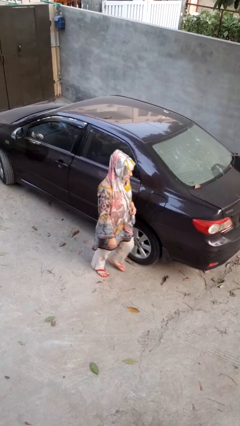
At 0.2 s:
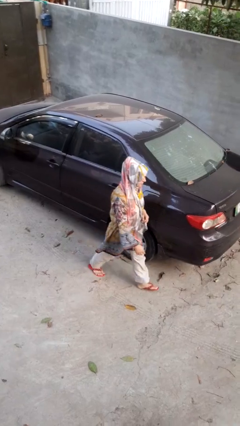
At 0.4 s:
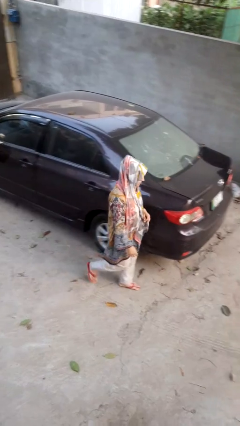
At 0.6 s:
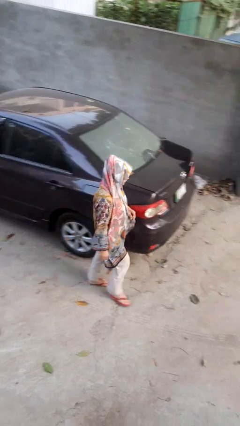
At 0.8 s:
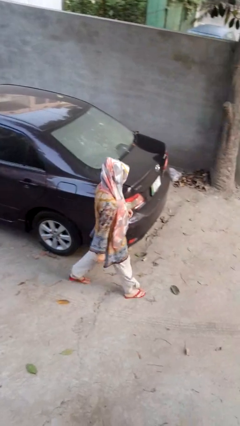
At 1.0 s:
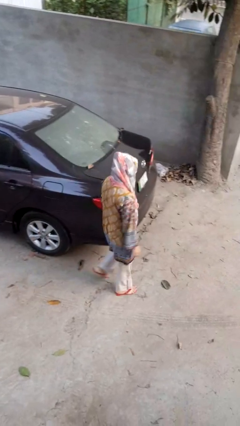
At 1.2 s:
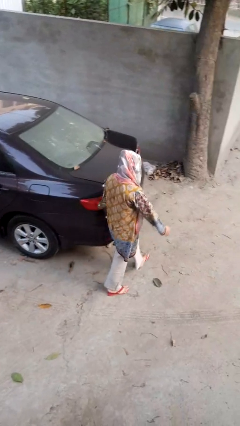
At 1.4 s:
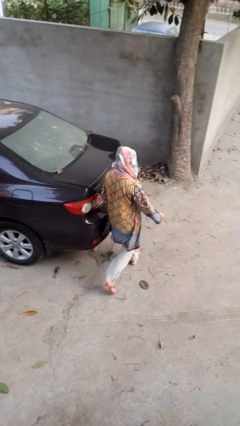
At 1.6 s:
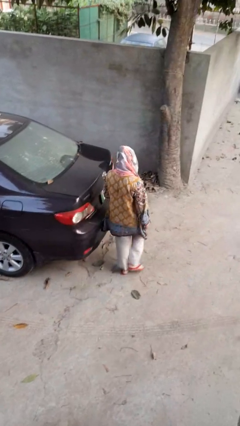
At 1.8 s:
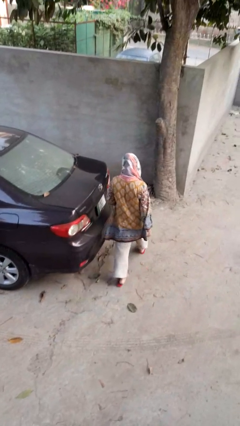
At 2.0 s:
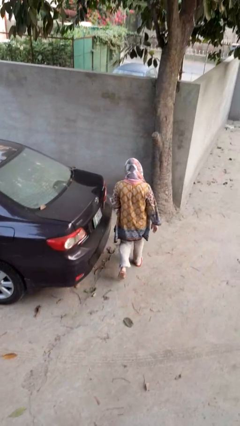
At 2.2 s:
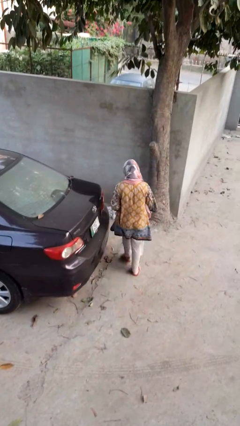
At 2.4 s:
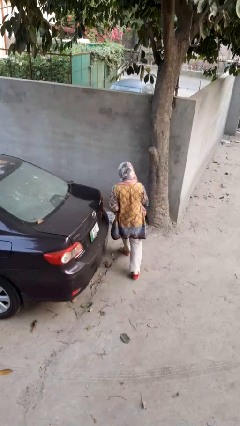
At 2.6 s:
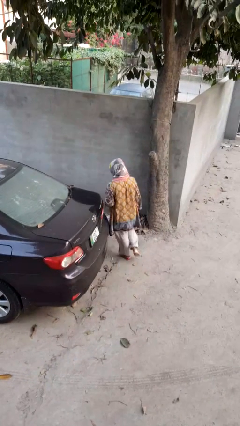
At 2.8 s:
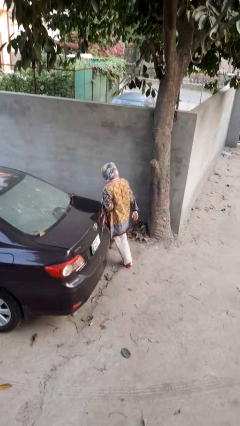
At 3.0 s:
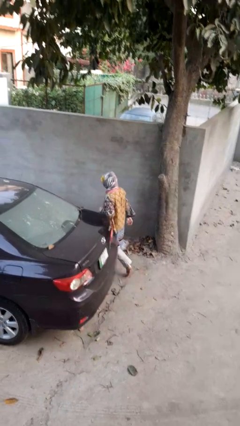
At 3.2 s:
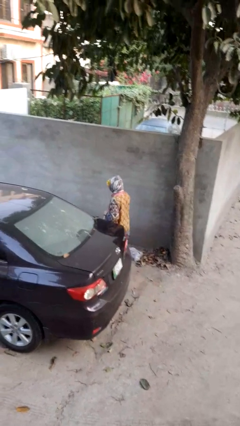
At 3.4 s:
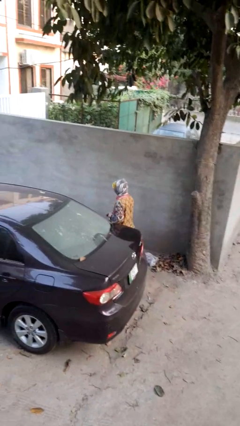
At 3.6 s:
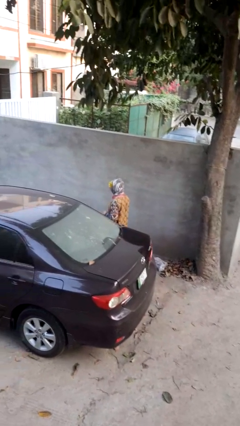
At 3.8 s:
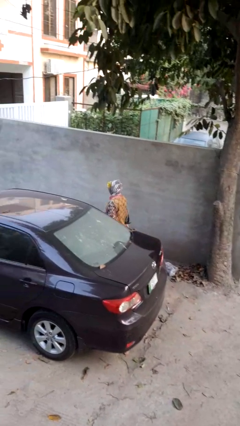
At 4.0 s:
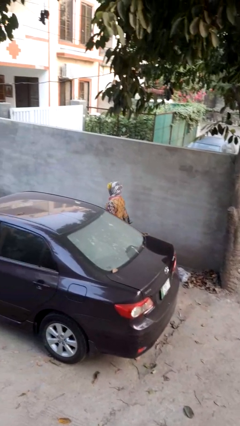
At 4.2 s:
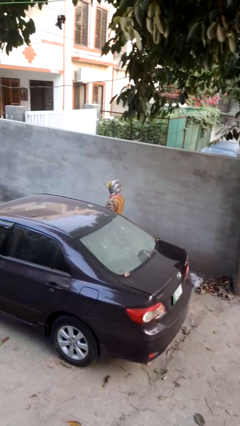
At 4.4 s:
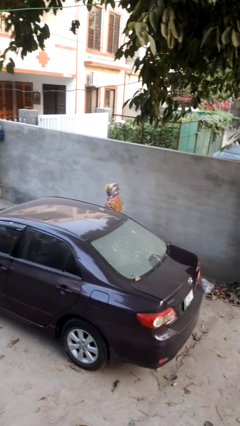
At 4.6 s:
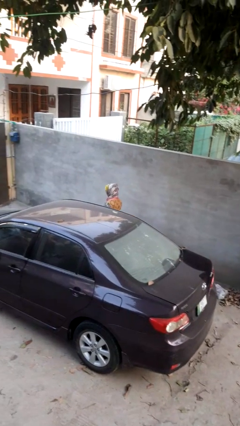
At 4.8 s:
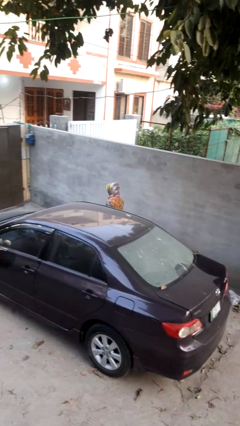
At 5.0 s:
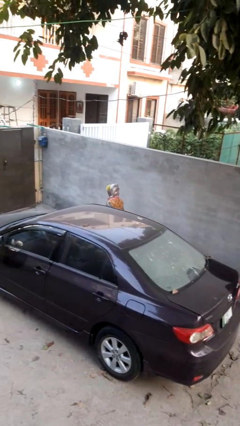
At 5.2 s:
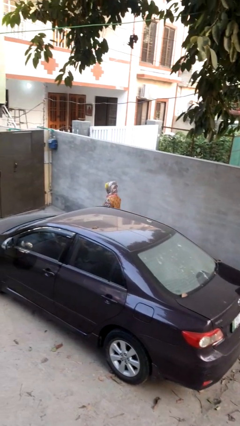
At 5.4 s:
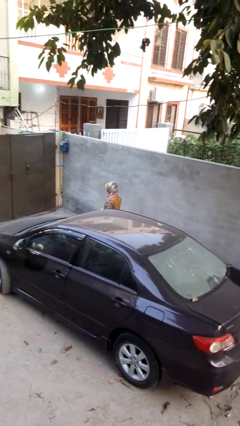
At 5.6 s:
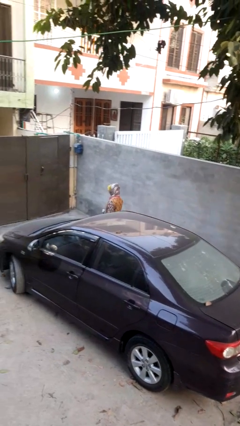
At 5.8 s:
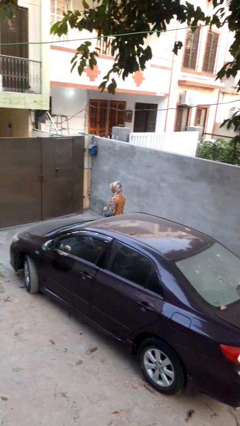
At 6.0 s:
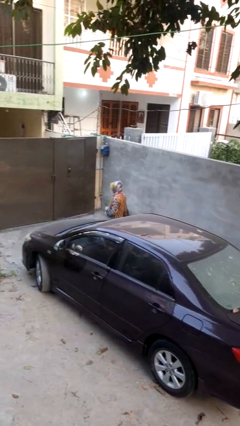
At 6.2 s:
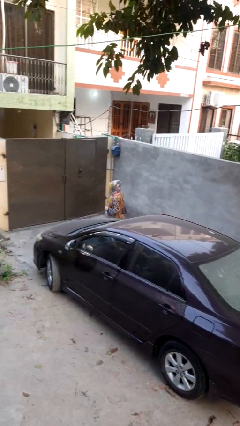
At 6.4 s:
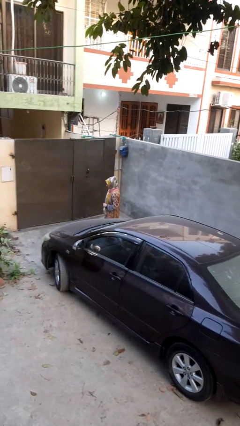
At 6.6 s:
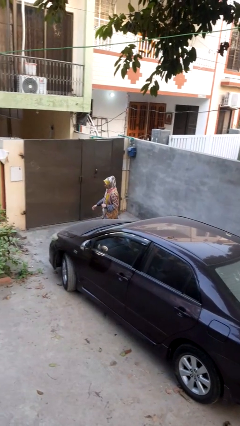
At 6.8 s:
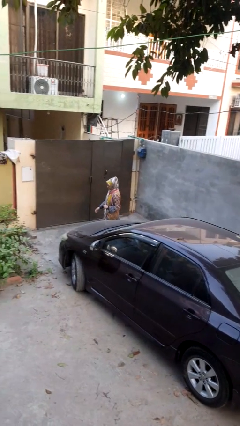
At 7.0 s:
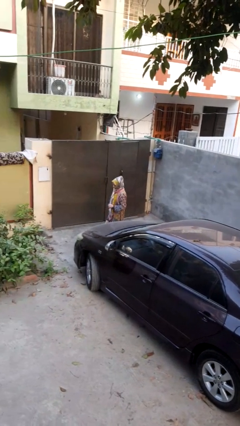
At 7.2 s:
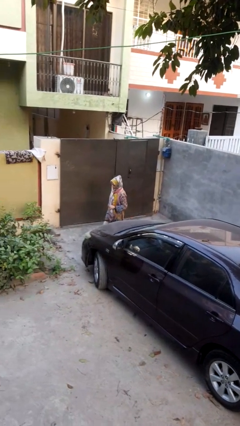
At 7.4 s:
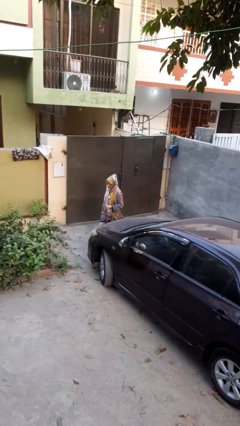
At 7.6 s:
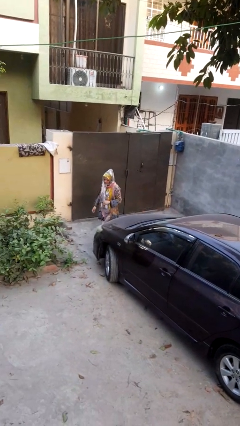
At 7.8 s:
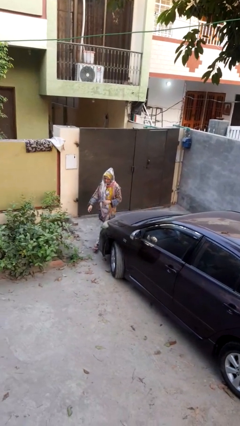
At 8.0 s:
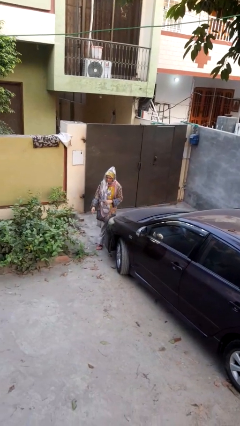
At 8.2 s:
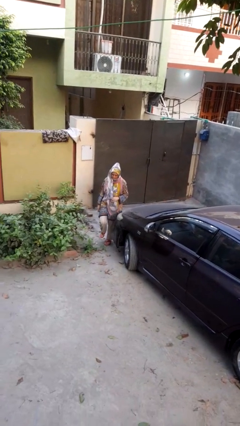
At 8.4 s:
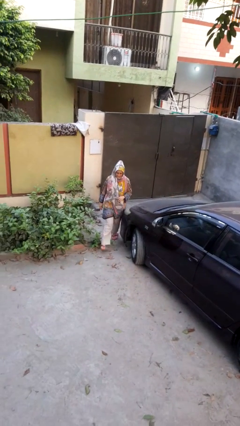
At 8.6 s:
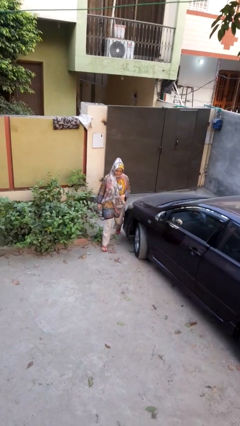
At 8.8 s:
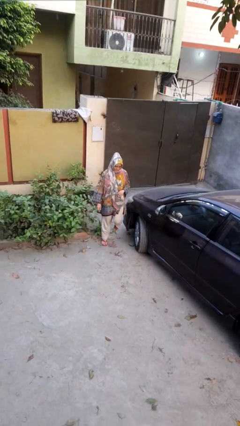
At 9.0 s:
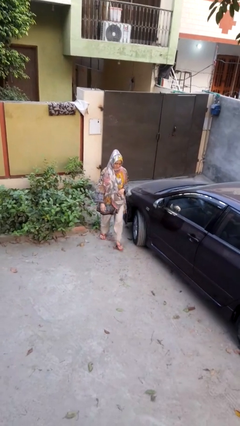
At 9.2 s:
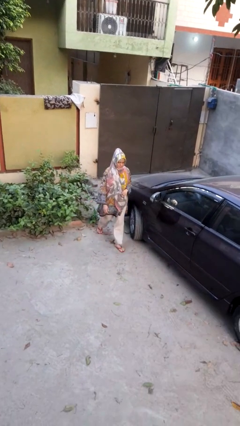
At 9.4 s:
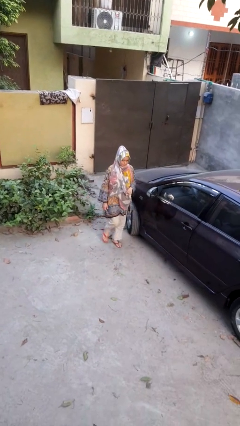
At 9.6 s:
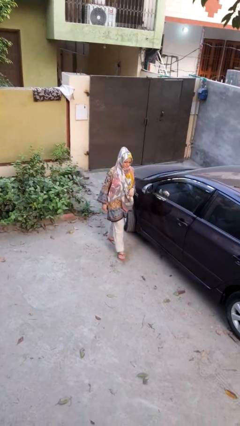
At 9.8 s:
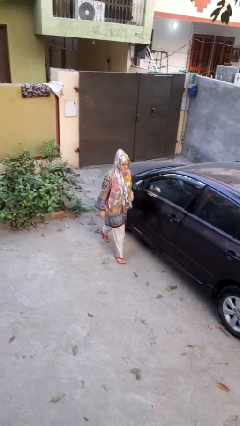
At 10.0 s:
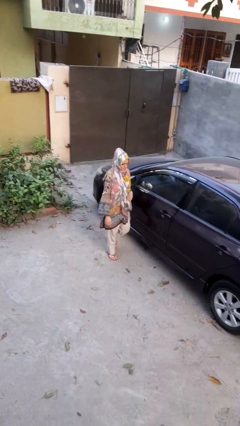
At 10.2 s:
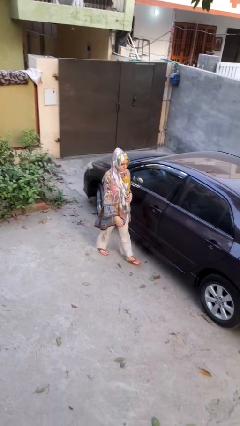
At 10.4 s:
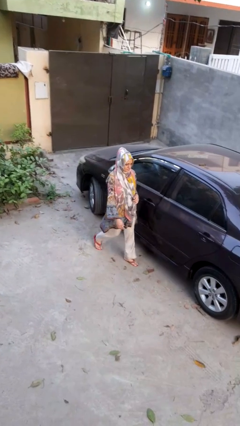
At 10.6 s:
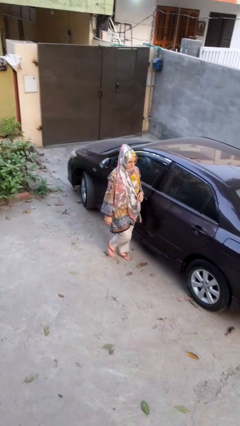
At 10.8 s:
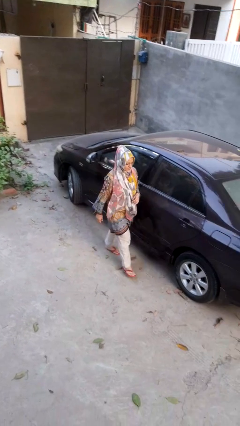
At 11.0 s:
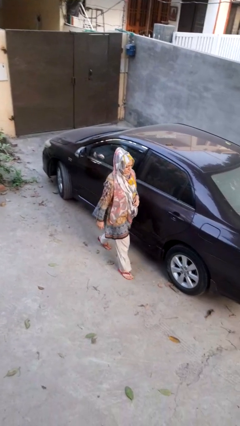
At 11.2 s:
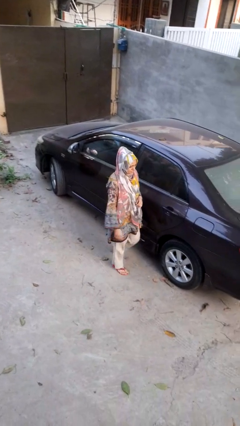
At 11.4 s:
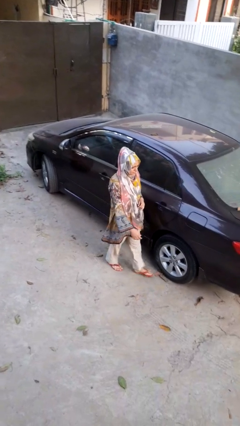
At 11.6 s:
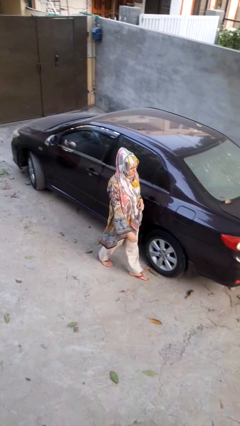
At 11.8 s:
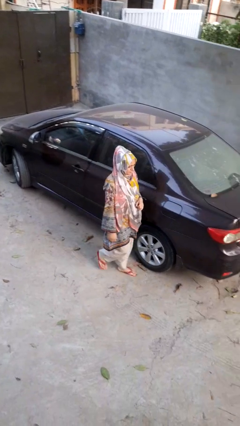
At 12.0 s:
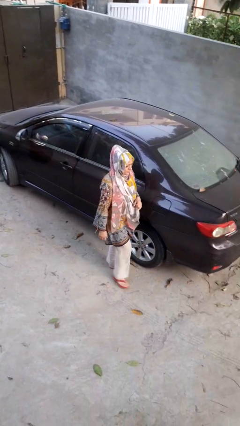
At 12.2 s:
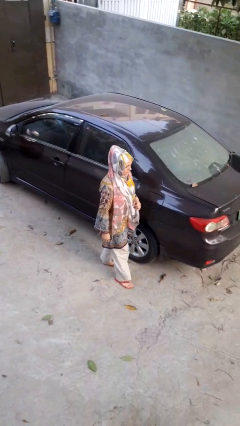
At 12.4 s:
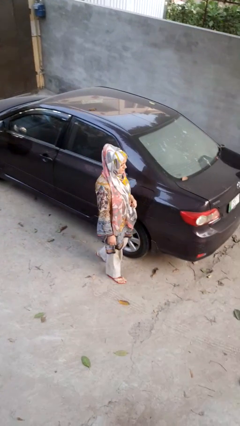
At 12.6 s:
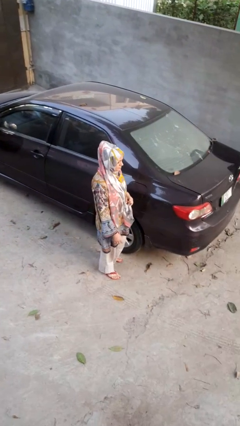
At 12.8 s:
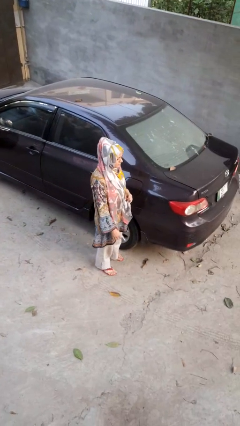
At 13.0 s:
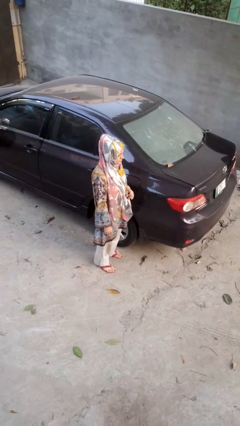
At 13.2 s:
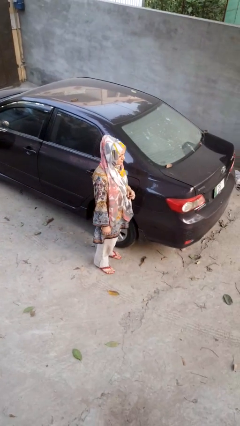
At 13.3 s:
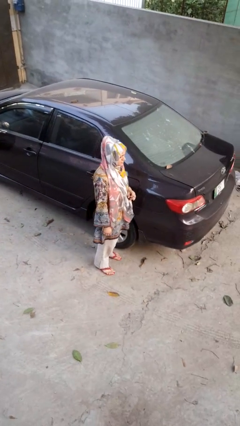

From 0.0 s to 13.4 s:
person walks around car

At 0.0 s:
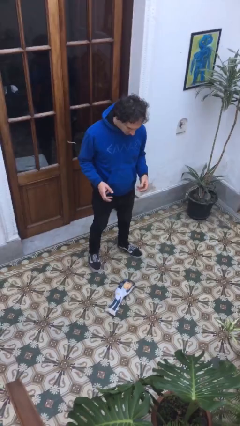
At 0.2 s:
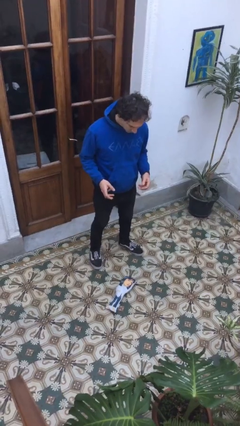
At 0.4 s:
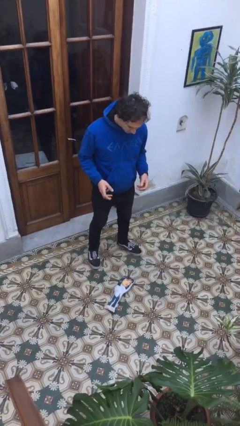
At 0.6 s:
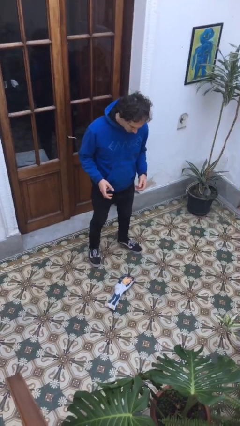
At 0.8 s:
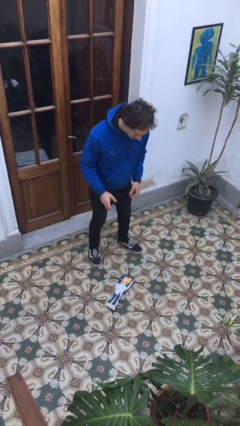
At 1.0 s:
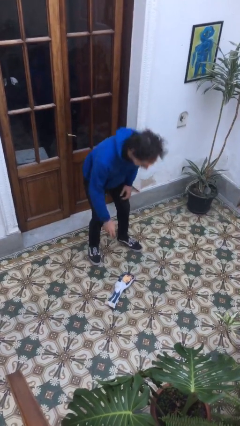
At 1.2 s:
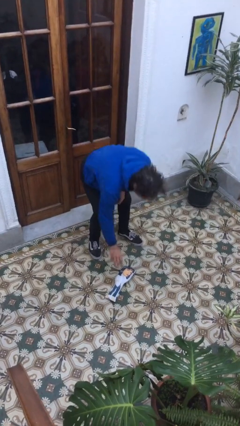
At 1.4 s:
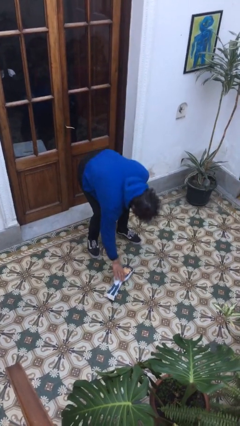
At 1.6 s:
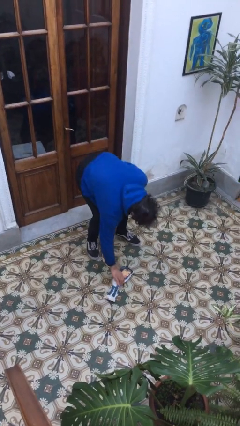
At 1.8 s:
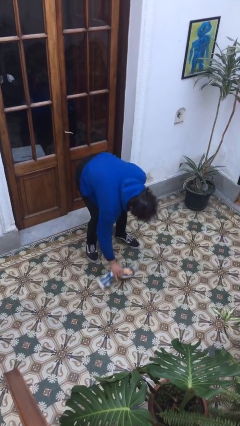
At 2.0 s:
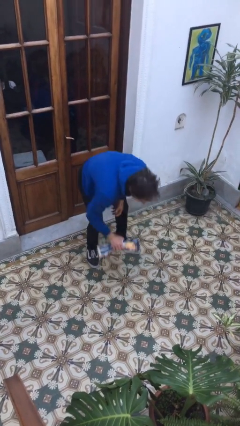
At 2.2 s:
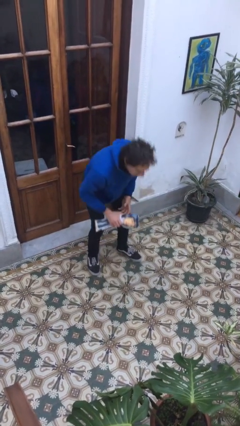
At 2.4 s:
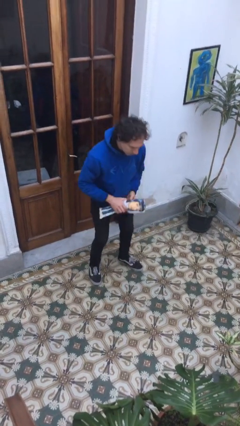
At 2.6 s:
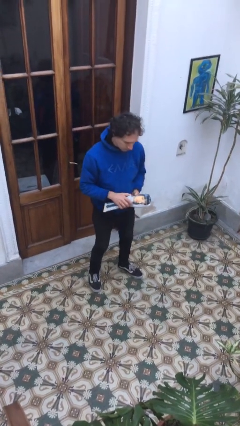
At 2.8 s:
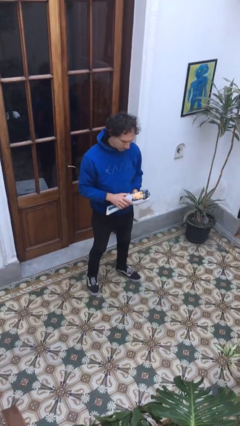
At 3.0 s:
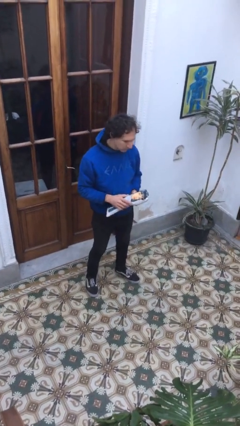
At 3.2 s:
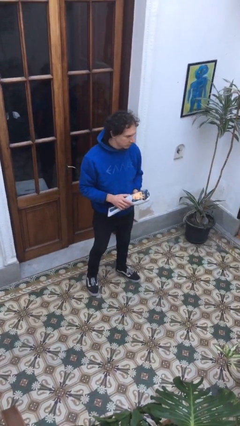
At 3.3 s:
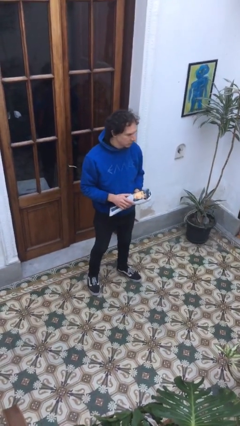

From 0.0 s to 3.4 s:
person picks up object from floor

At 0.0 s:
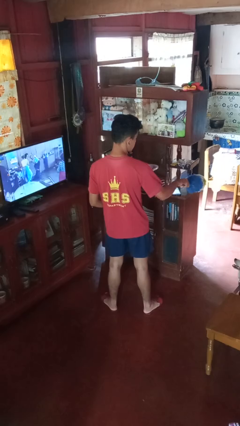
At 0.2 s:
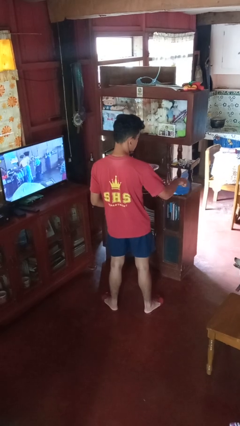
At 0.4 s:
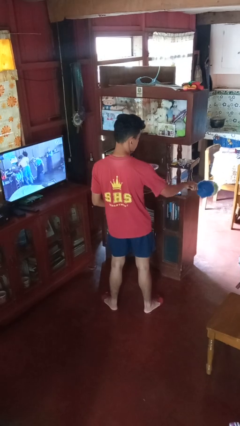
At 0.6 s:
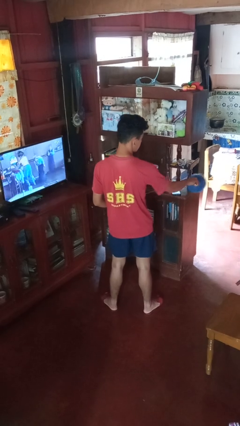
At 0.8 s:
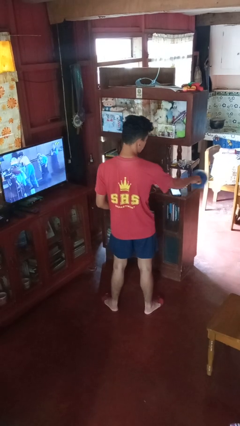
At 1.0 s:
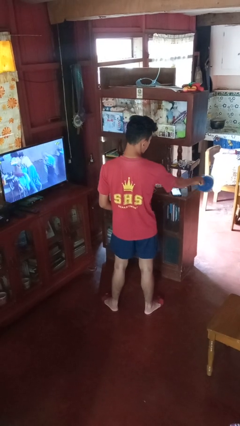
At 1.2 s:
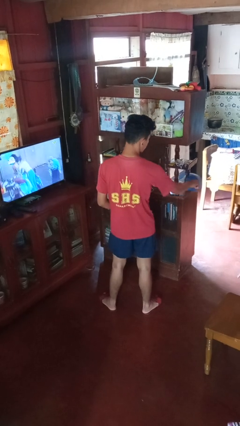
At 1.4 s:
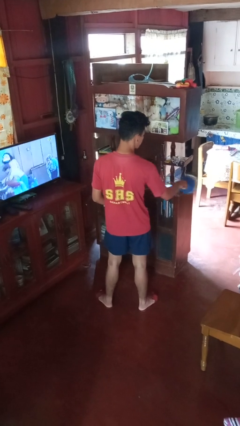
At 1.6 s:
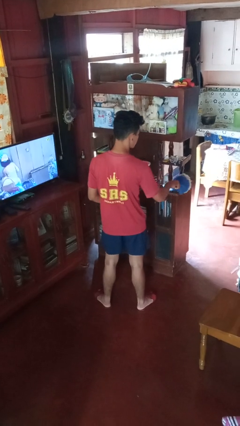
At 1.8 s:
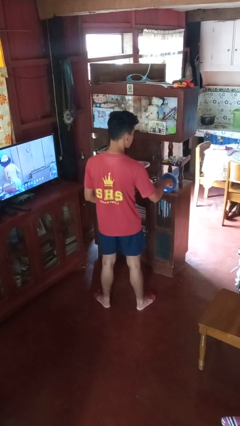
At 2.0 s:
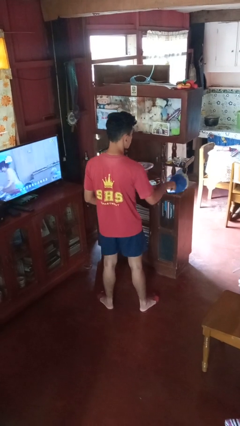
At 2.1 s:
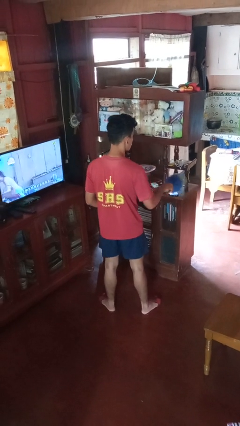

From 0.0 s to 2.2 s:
person dusts furniture
